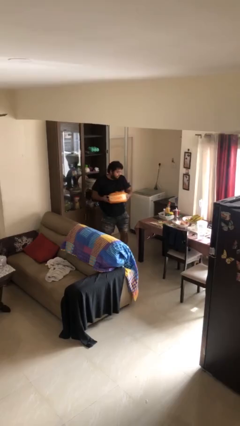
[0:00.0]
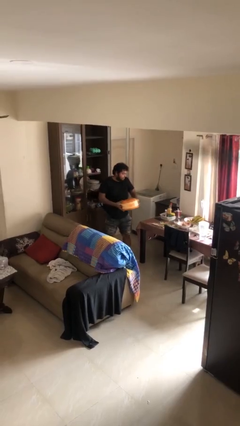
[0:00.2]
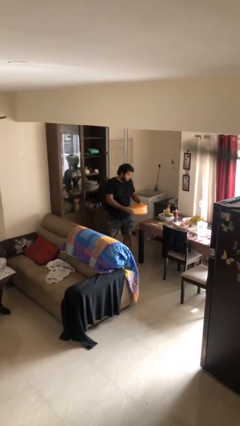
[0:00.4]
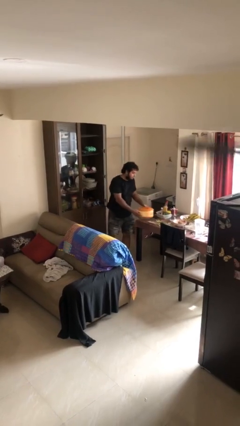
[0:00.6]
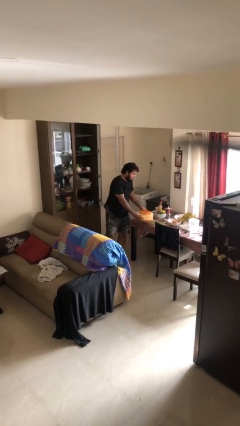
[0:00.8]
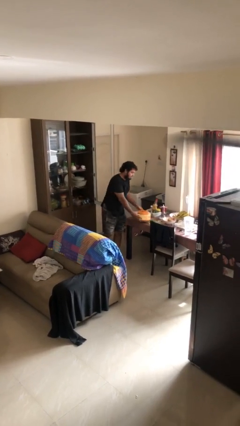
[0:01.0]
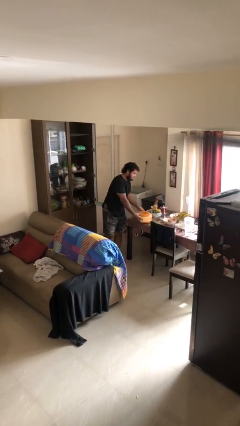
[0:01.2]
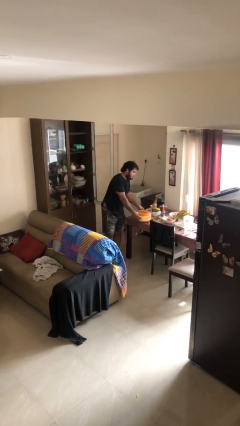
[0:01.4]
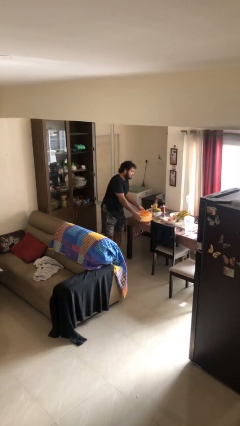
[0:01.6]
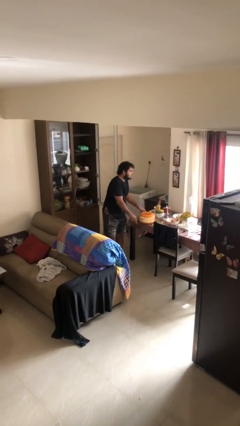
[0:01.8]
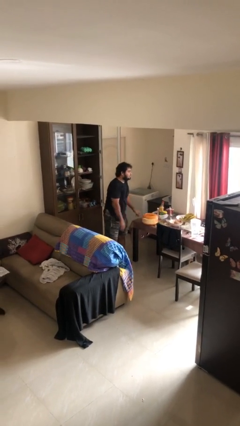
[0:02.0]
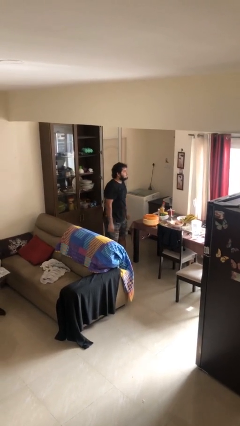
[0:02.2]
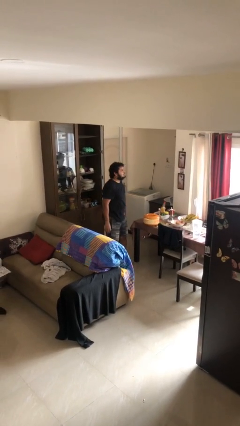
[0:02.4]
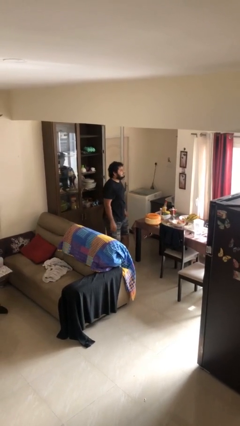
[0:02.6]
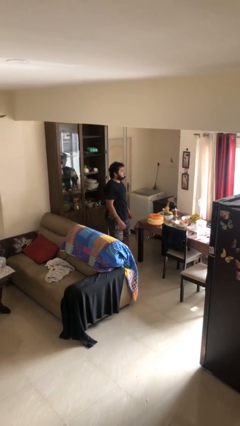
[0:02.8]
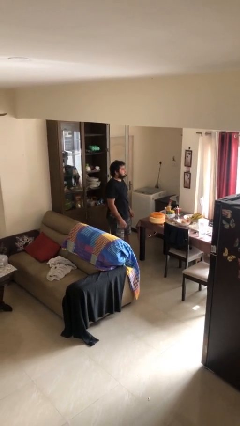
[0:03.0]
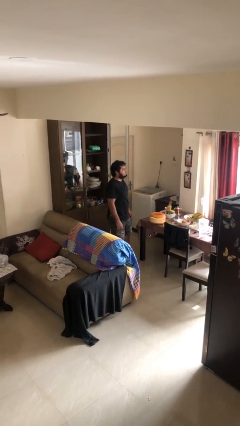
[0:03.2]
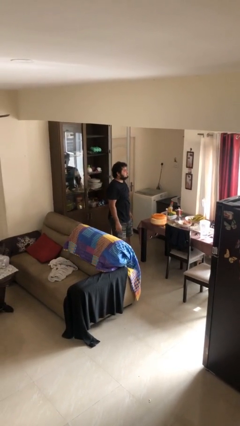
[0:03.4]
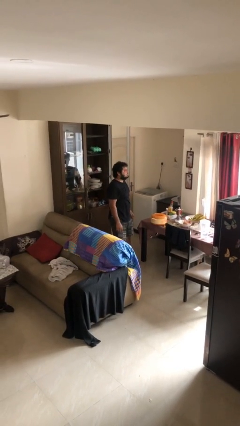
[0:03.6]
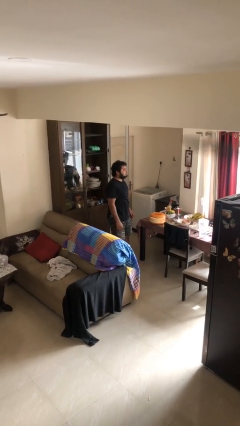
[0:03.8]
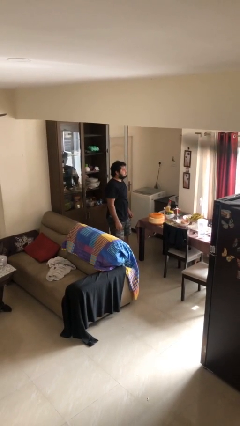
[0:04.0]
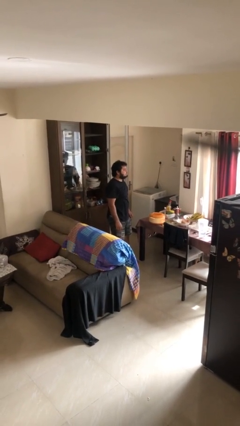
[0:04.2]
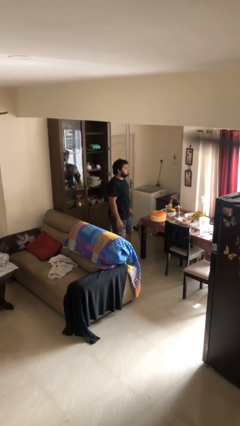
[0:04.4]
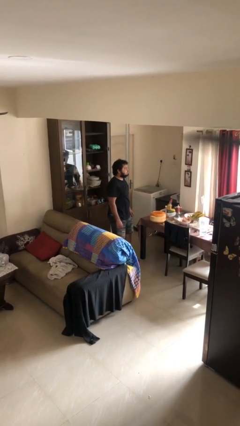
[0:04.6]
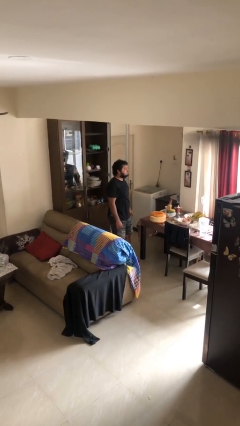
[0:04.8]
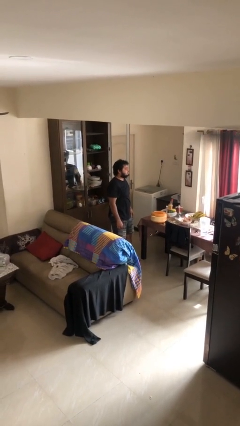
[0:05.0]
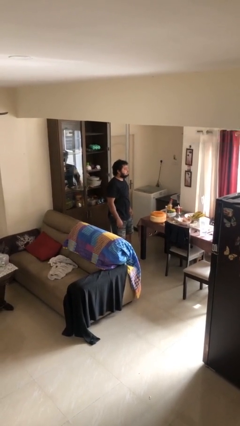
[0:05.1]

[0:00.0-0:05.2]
person puts down object on table

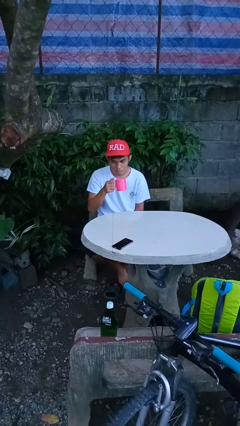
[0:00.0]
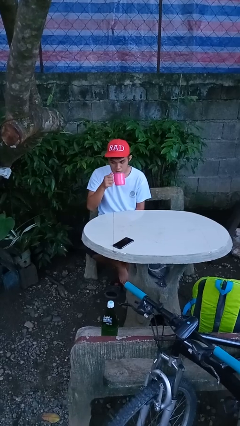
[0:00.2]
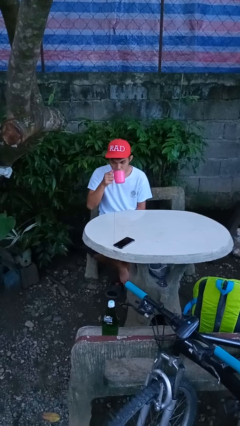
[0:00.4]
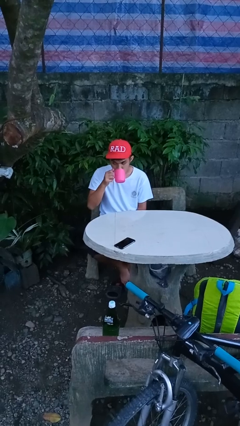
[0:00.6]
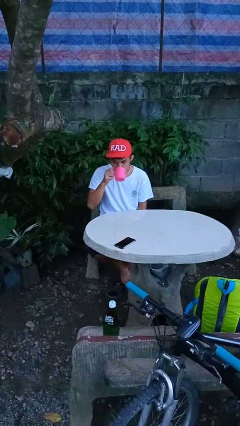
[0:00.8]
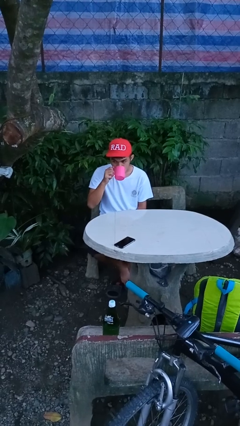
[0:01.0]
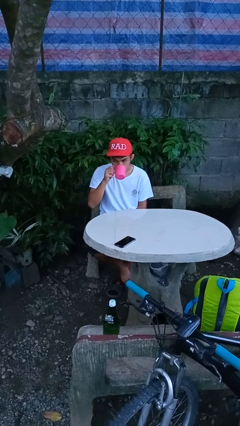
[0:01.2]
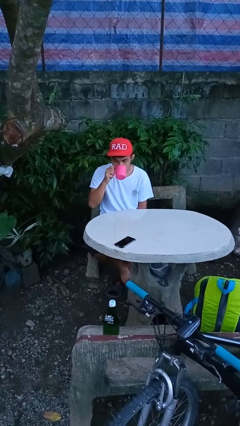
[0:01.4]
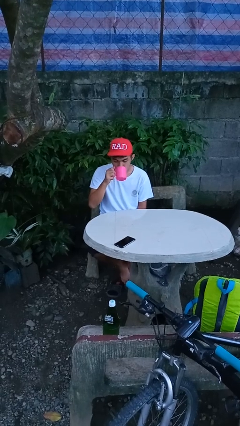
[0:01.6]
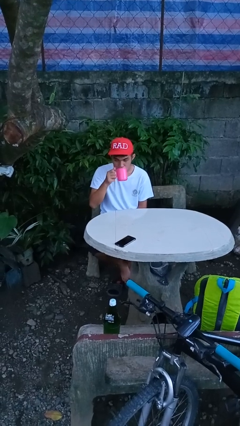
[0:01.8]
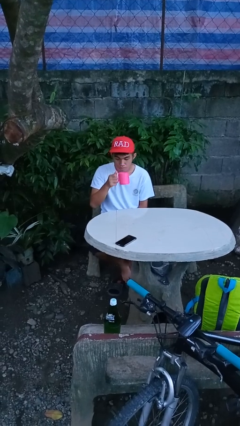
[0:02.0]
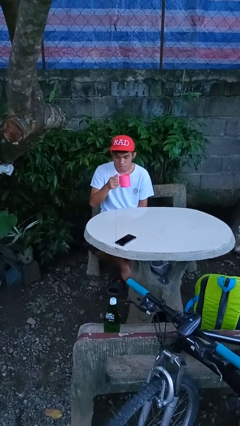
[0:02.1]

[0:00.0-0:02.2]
person drinks from mug

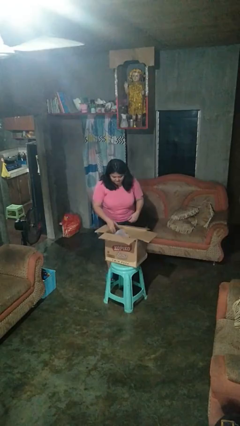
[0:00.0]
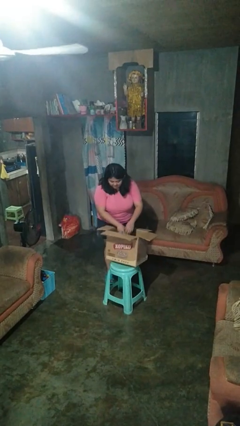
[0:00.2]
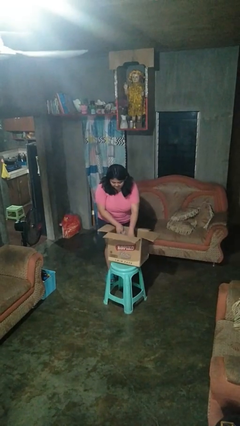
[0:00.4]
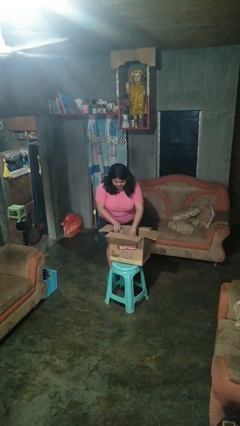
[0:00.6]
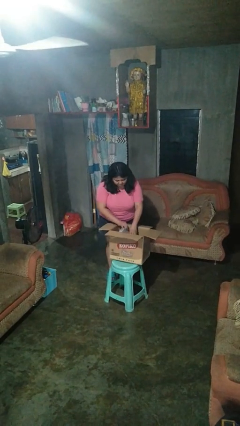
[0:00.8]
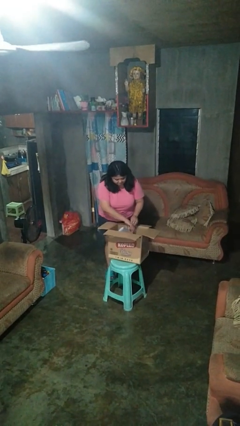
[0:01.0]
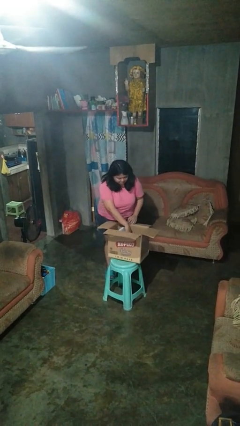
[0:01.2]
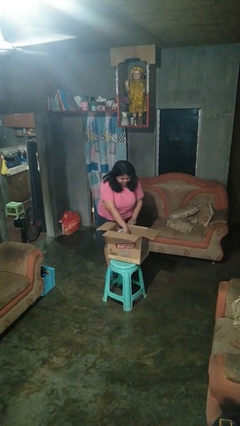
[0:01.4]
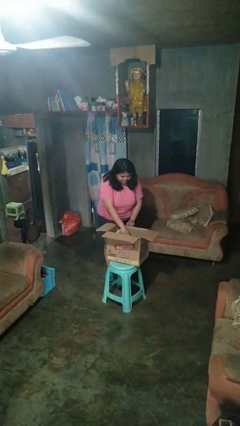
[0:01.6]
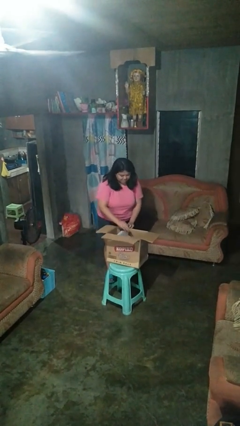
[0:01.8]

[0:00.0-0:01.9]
person searches in box

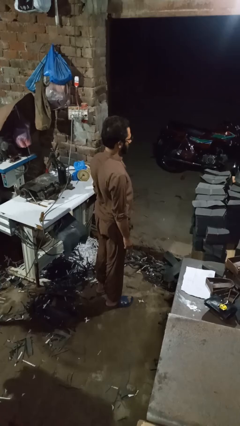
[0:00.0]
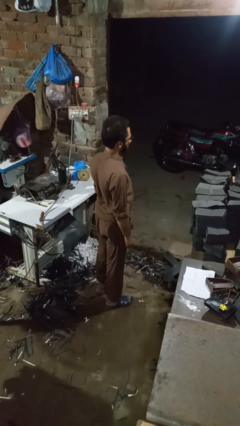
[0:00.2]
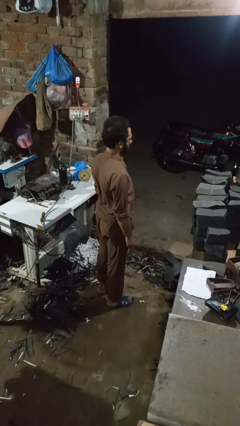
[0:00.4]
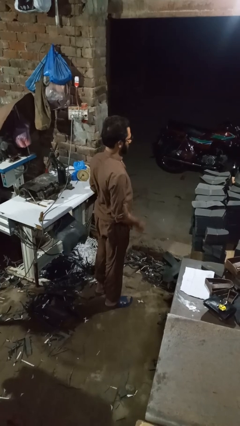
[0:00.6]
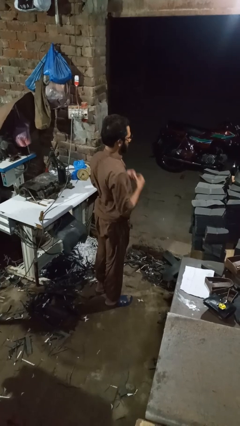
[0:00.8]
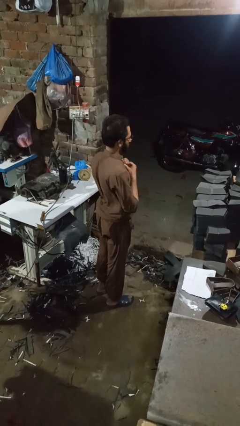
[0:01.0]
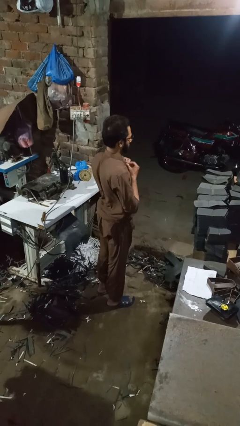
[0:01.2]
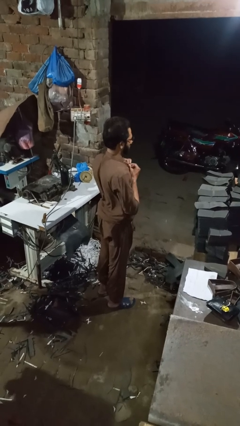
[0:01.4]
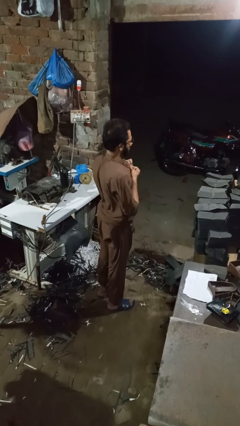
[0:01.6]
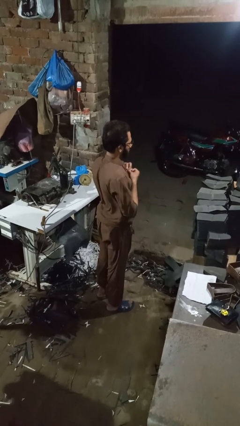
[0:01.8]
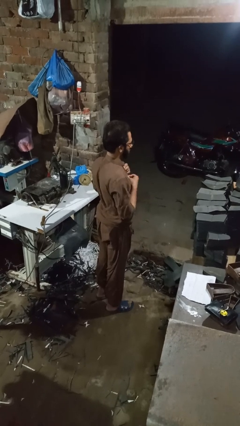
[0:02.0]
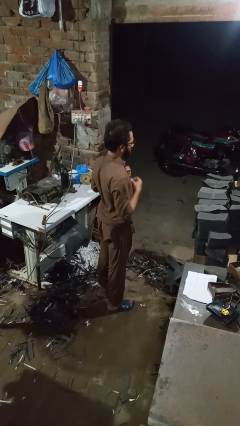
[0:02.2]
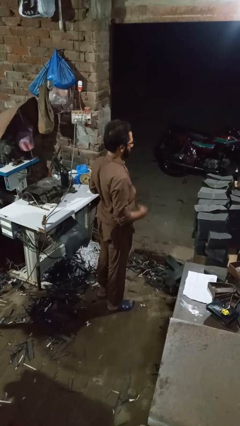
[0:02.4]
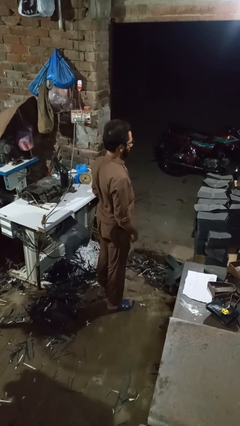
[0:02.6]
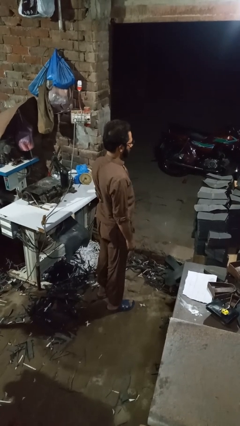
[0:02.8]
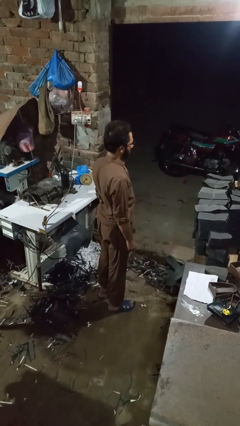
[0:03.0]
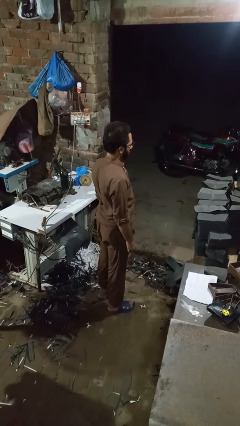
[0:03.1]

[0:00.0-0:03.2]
person unbuttons shirt

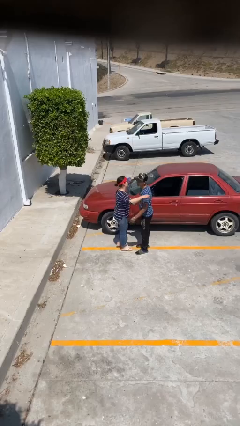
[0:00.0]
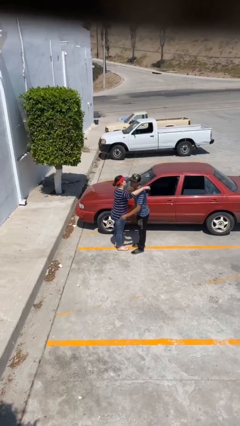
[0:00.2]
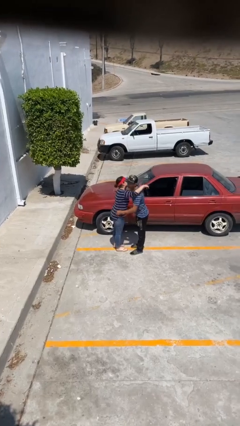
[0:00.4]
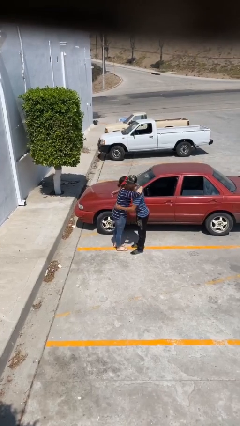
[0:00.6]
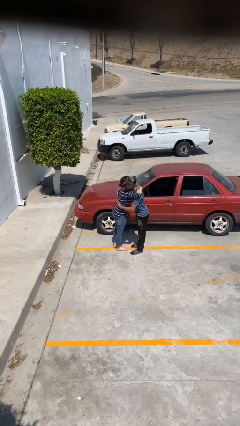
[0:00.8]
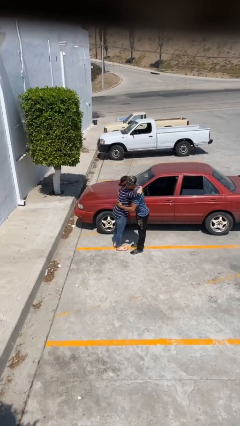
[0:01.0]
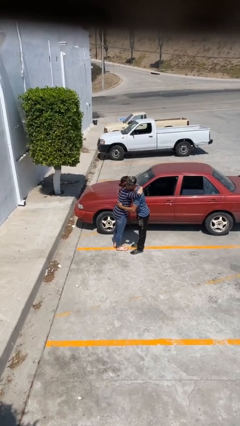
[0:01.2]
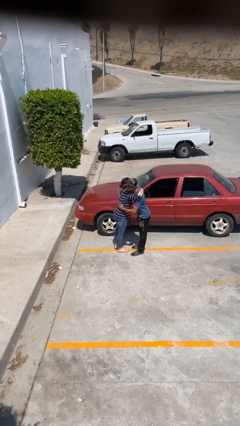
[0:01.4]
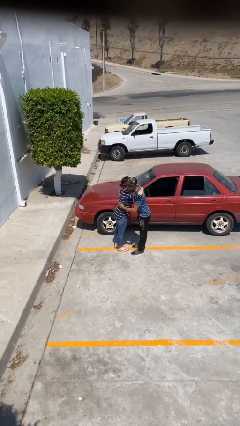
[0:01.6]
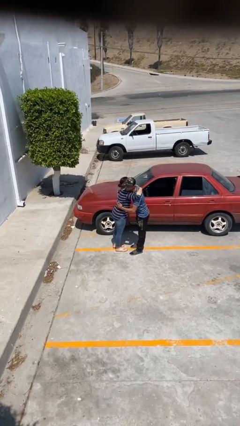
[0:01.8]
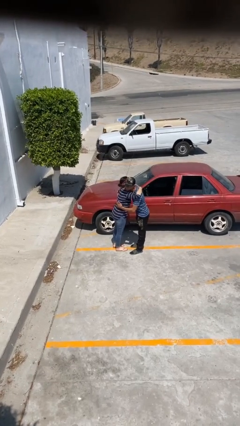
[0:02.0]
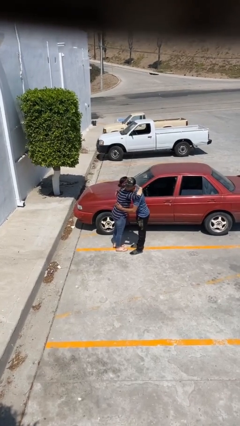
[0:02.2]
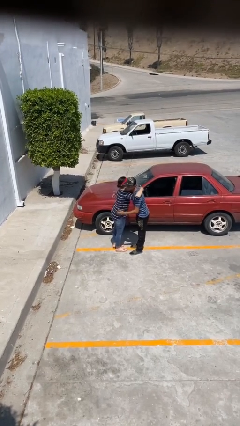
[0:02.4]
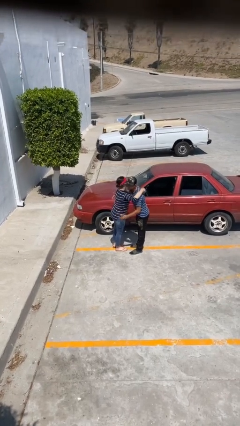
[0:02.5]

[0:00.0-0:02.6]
person embraces person

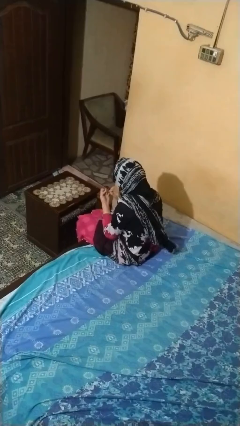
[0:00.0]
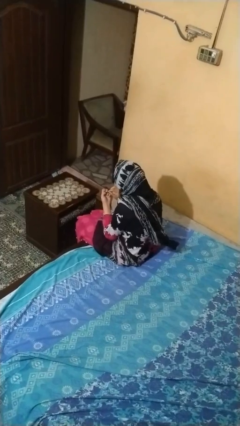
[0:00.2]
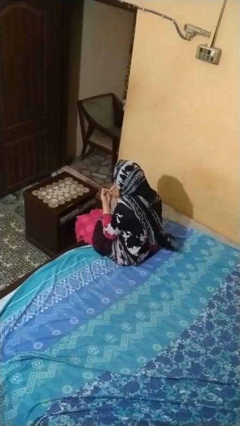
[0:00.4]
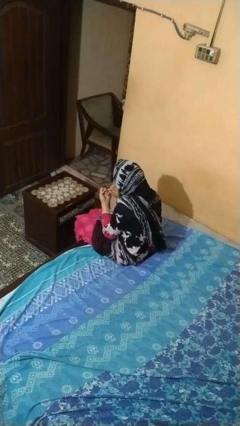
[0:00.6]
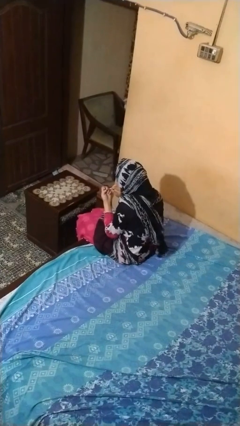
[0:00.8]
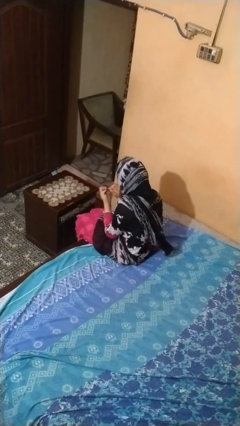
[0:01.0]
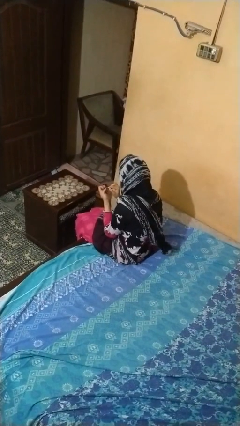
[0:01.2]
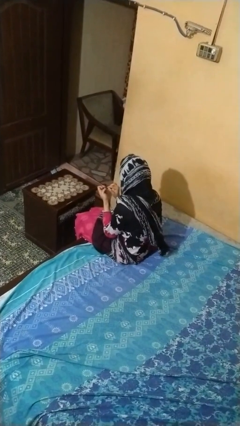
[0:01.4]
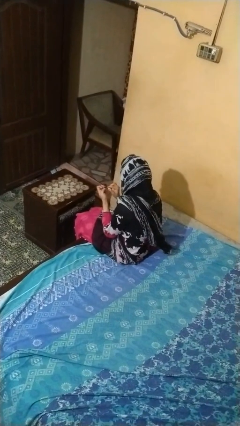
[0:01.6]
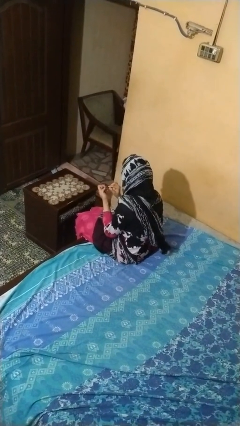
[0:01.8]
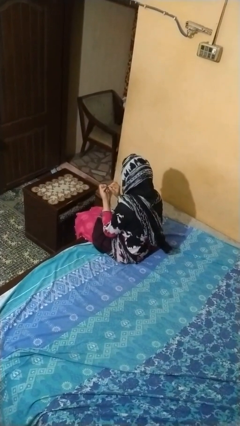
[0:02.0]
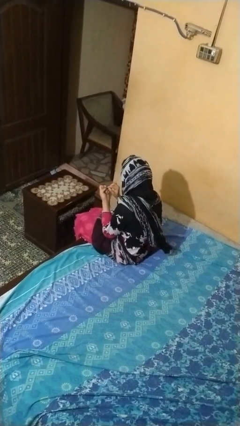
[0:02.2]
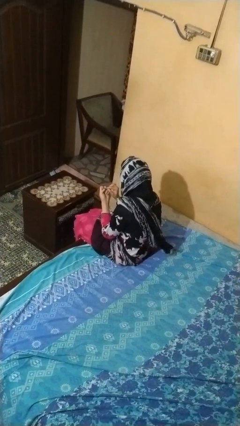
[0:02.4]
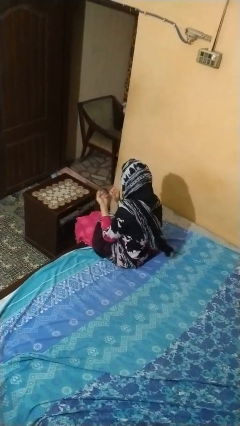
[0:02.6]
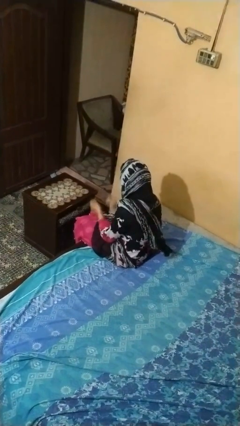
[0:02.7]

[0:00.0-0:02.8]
person files fingernails
